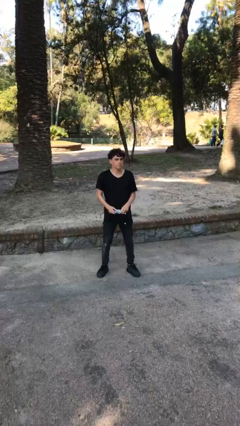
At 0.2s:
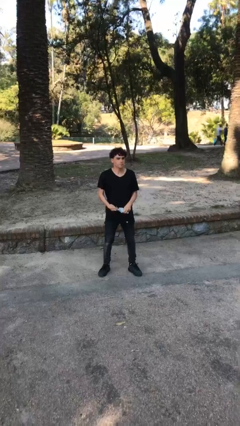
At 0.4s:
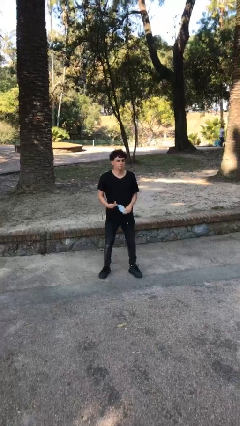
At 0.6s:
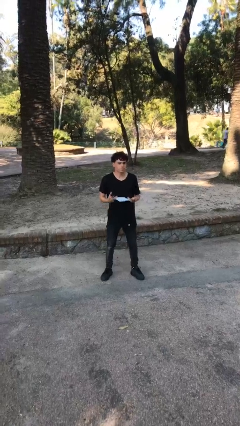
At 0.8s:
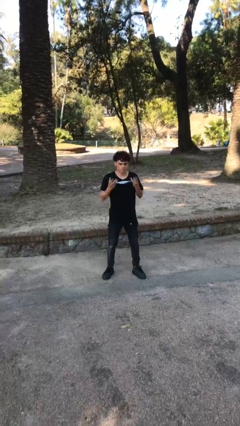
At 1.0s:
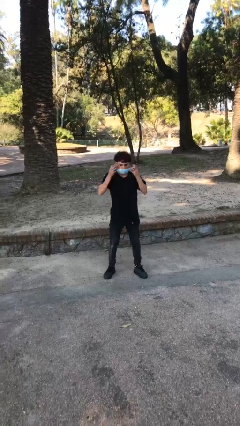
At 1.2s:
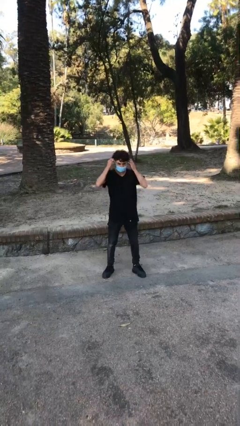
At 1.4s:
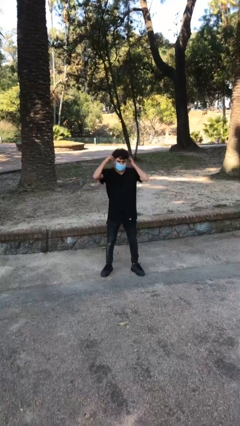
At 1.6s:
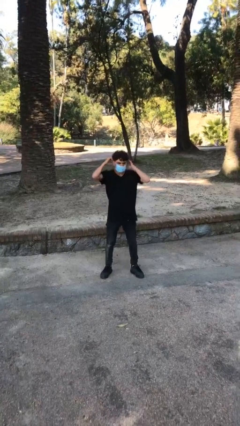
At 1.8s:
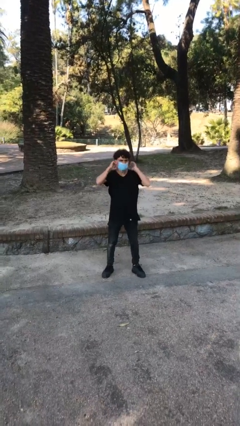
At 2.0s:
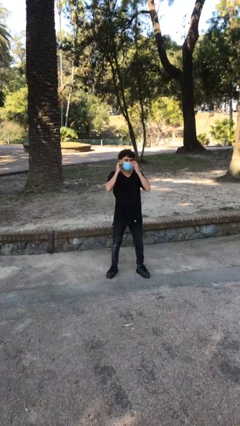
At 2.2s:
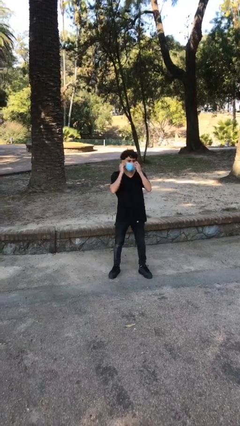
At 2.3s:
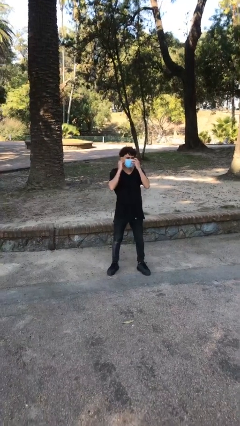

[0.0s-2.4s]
person puts on facemask

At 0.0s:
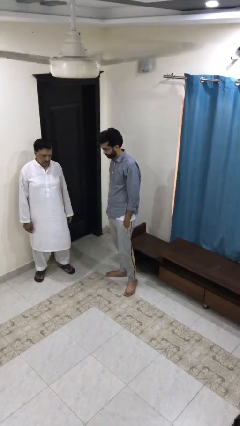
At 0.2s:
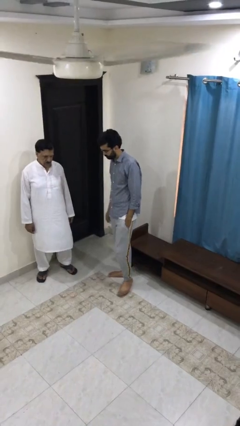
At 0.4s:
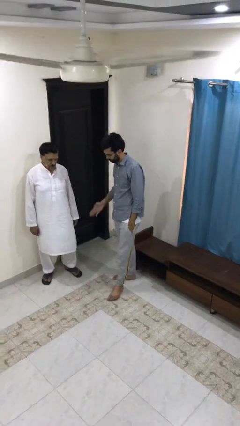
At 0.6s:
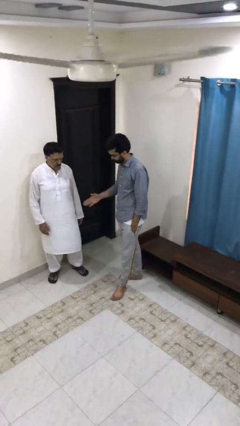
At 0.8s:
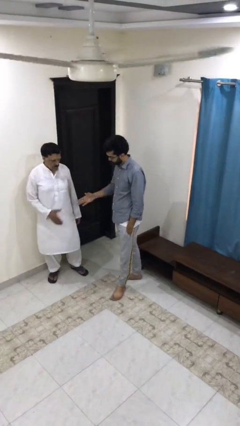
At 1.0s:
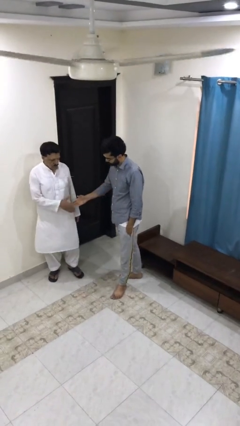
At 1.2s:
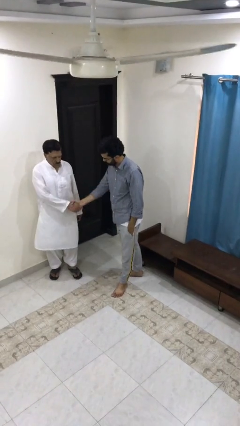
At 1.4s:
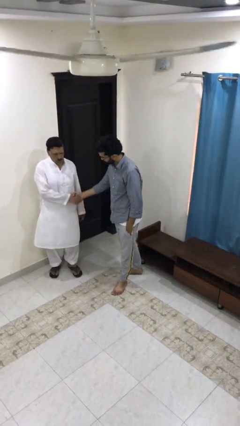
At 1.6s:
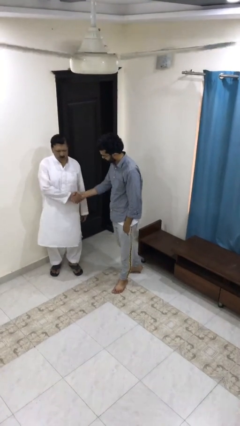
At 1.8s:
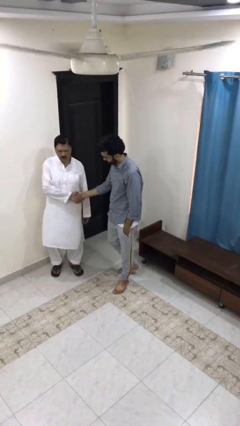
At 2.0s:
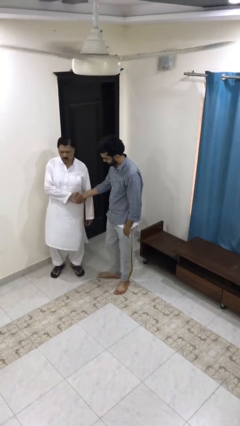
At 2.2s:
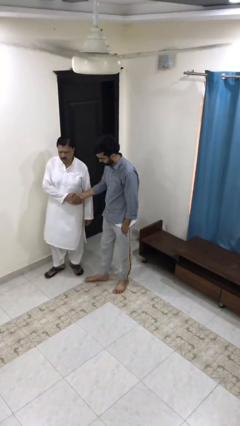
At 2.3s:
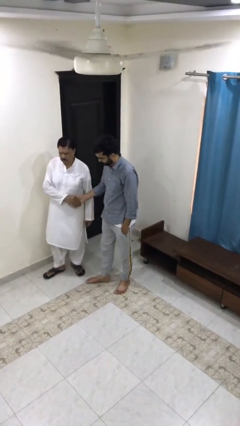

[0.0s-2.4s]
person shakes hand

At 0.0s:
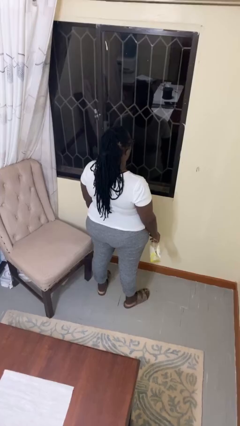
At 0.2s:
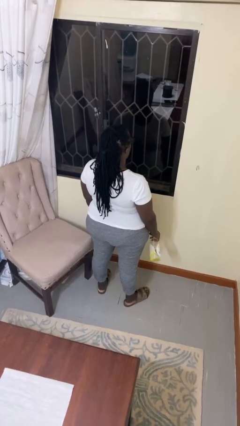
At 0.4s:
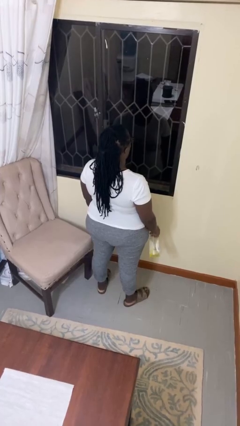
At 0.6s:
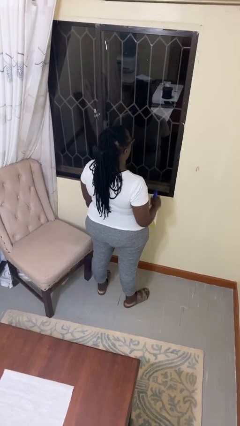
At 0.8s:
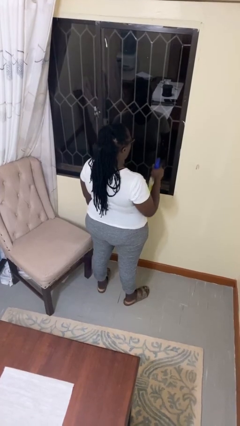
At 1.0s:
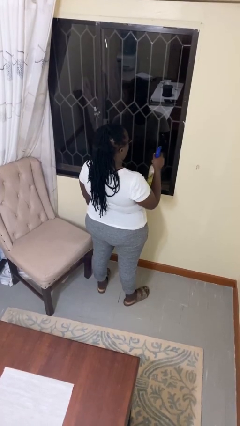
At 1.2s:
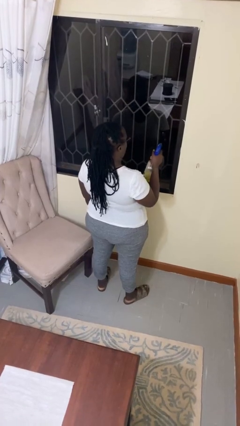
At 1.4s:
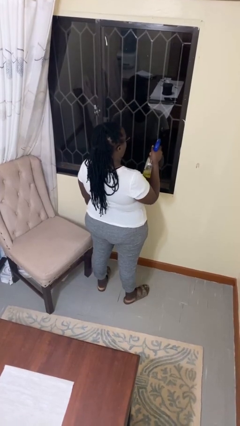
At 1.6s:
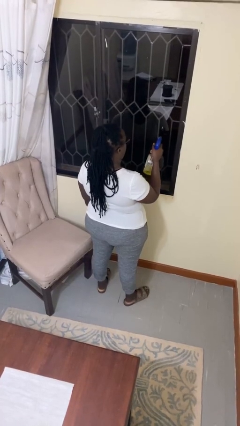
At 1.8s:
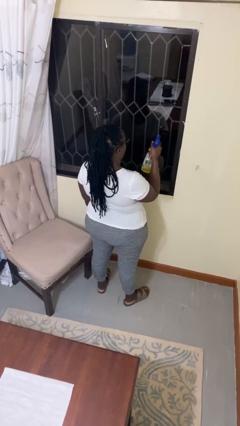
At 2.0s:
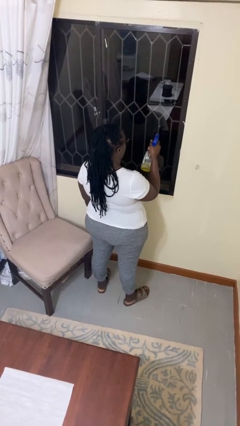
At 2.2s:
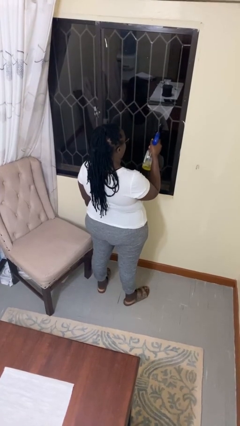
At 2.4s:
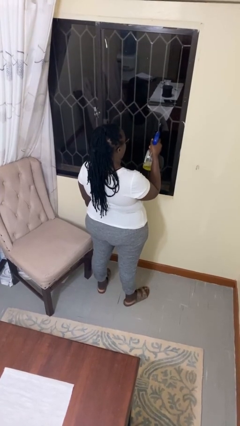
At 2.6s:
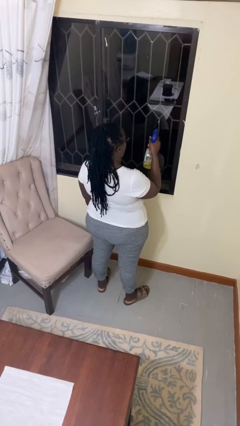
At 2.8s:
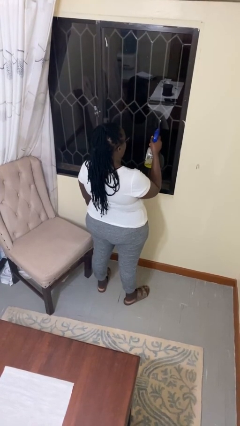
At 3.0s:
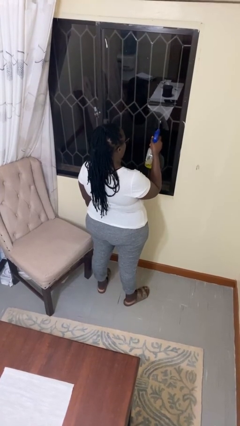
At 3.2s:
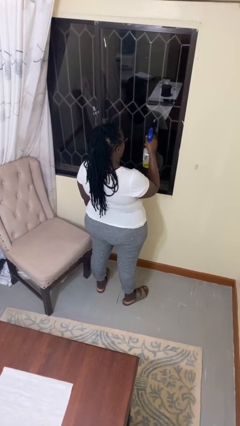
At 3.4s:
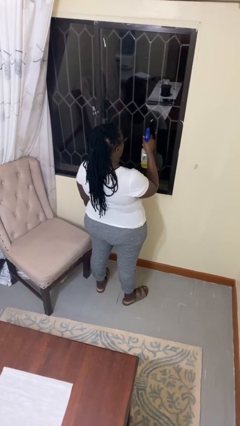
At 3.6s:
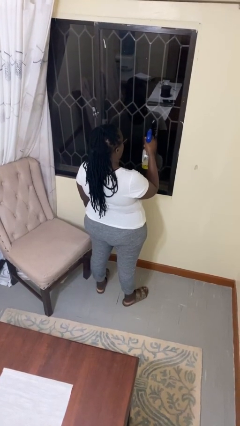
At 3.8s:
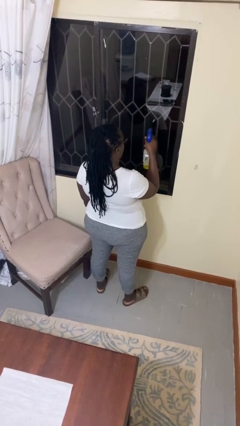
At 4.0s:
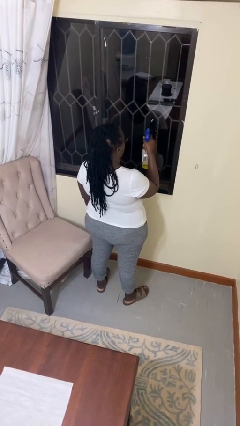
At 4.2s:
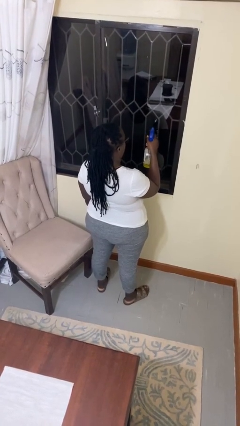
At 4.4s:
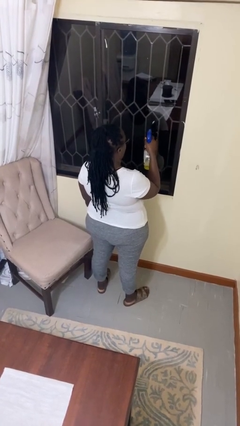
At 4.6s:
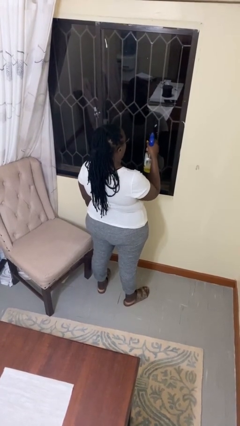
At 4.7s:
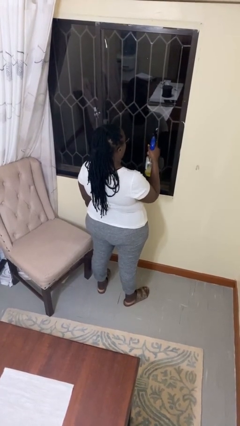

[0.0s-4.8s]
person sprays from bottle

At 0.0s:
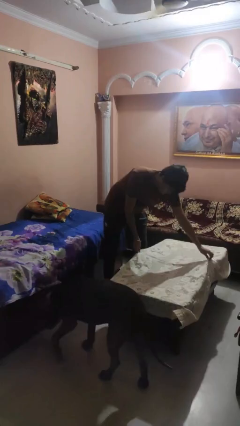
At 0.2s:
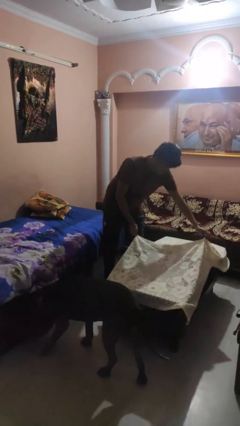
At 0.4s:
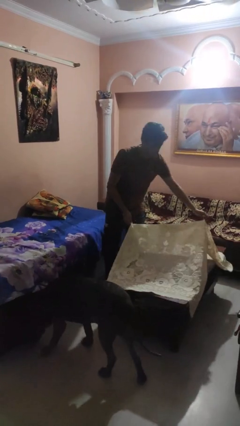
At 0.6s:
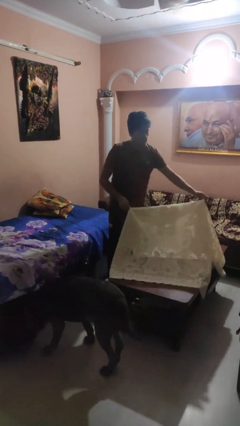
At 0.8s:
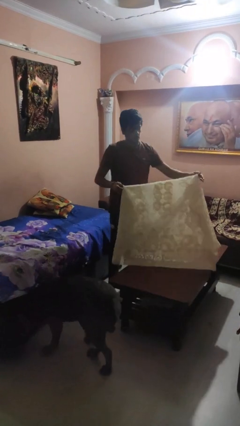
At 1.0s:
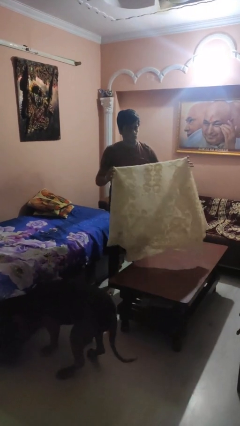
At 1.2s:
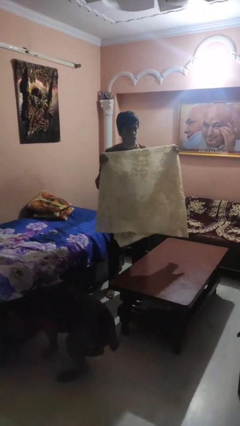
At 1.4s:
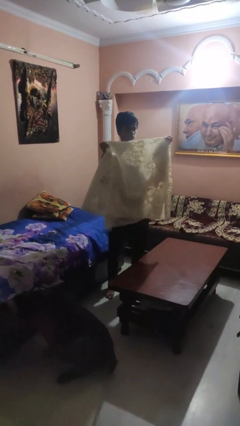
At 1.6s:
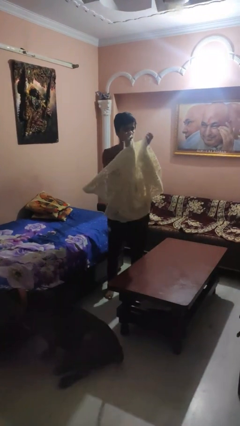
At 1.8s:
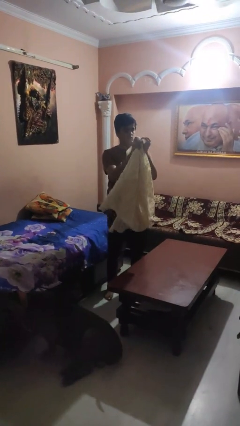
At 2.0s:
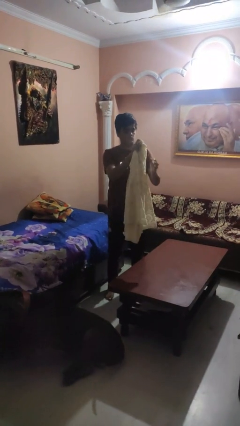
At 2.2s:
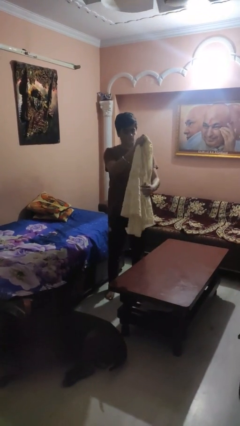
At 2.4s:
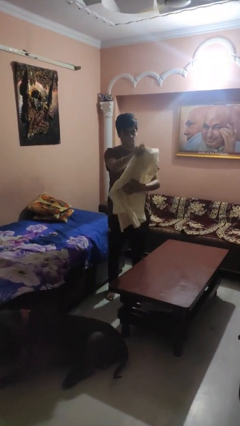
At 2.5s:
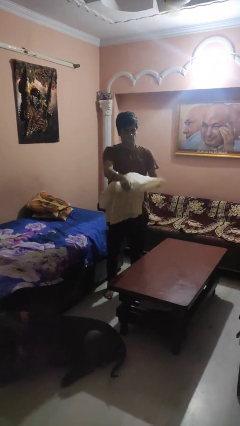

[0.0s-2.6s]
person folds tablecloth

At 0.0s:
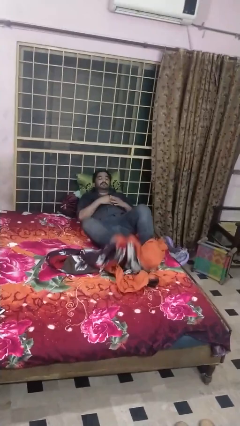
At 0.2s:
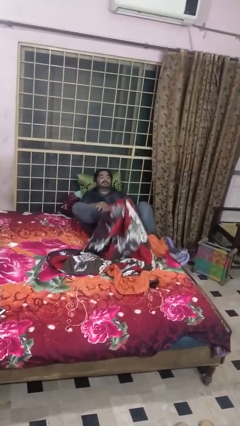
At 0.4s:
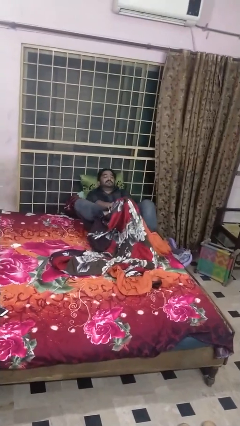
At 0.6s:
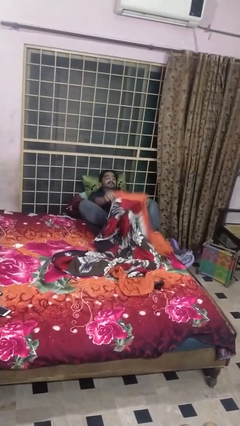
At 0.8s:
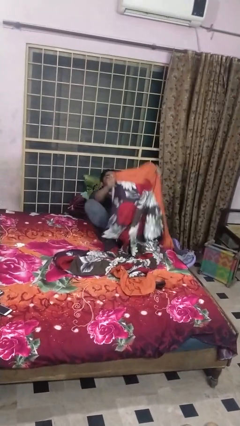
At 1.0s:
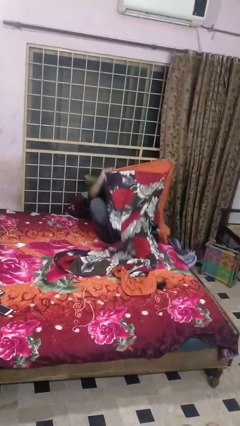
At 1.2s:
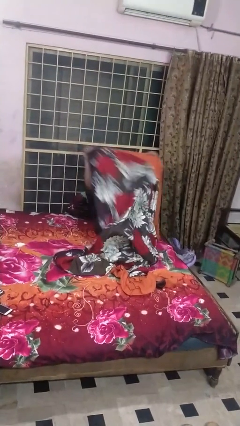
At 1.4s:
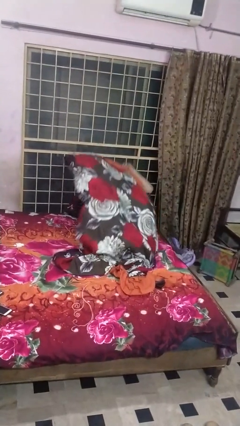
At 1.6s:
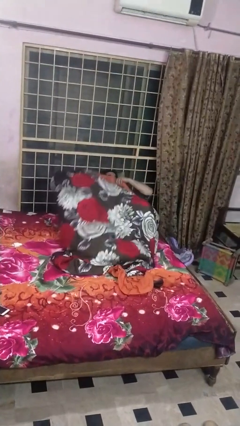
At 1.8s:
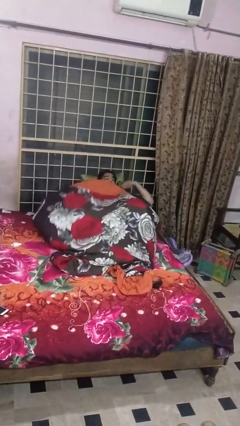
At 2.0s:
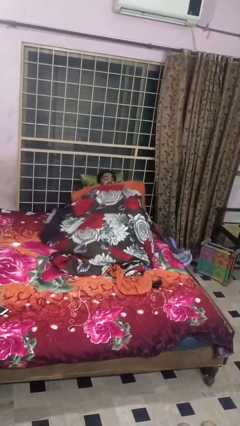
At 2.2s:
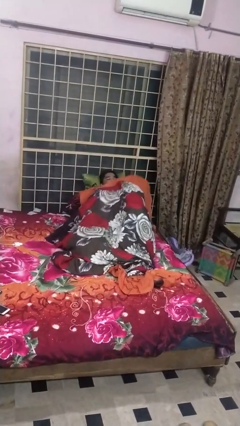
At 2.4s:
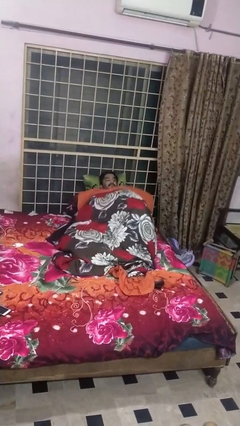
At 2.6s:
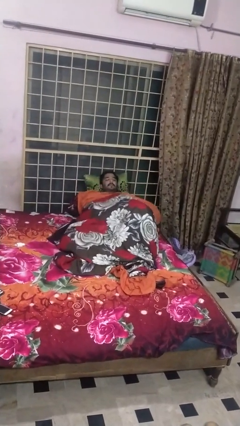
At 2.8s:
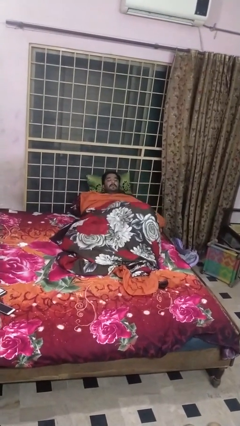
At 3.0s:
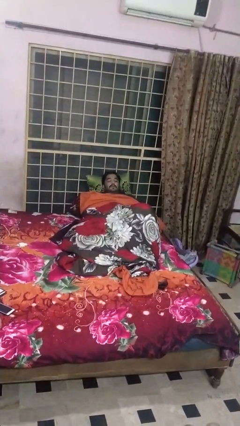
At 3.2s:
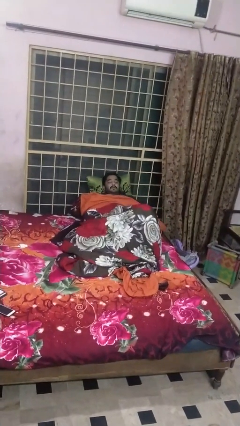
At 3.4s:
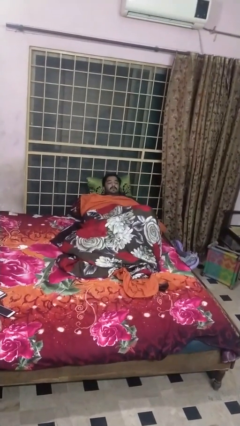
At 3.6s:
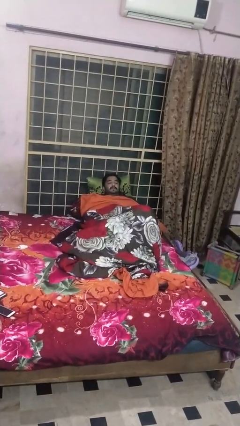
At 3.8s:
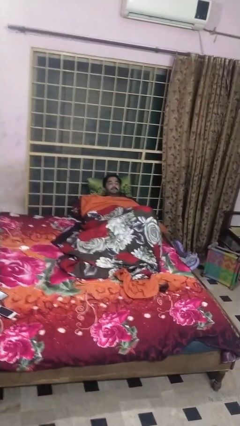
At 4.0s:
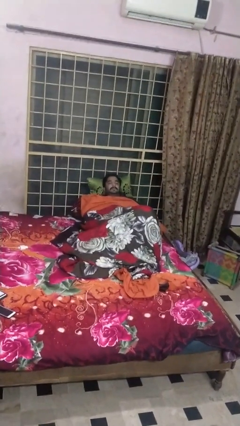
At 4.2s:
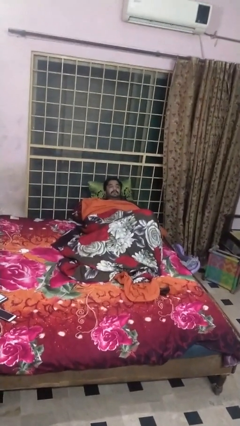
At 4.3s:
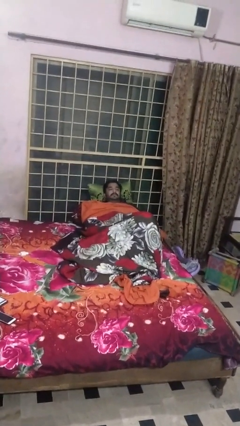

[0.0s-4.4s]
person covers with bedsheets

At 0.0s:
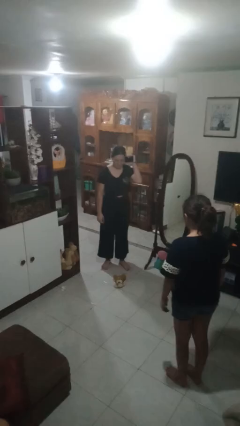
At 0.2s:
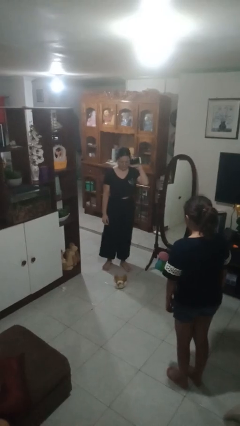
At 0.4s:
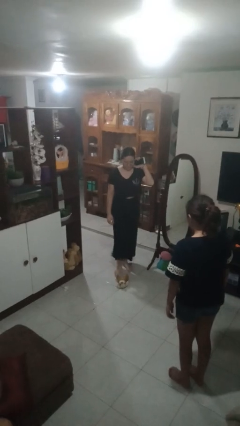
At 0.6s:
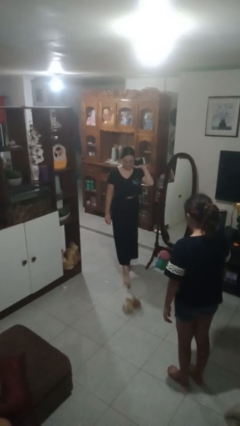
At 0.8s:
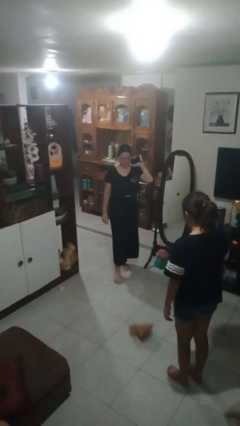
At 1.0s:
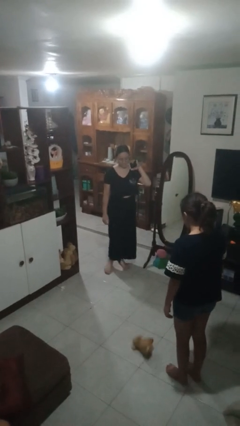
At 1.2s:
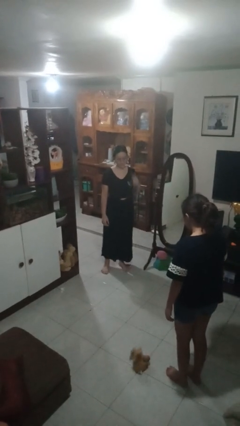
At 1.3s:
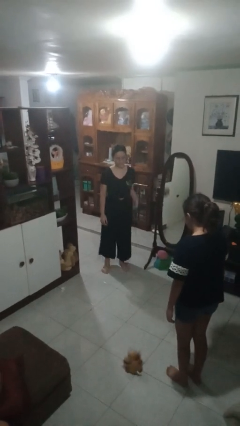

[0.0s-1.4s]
person kicks object to person
